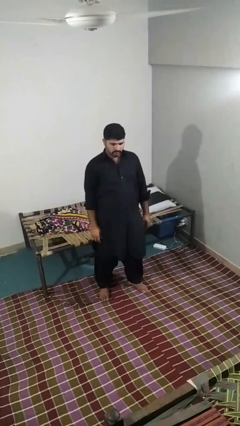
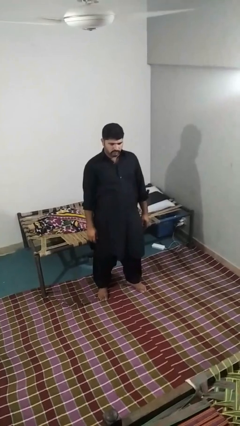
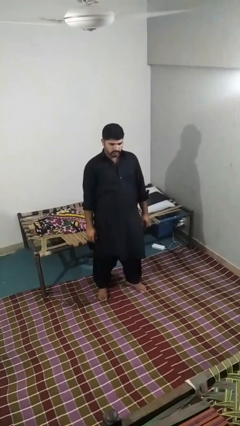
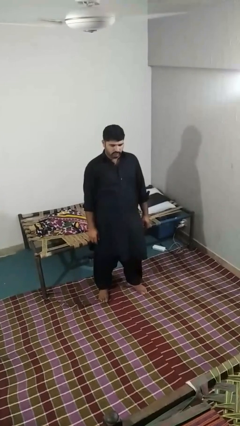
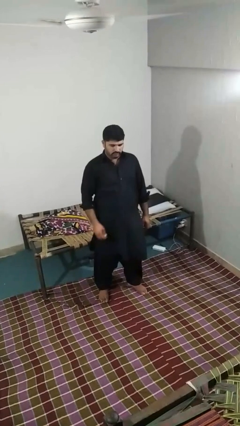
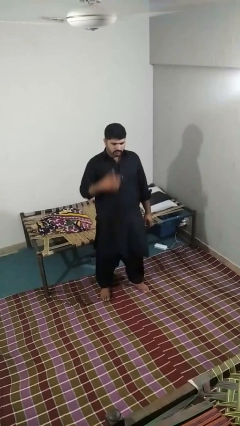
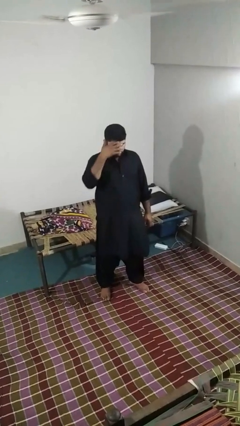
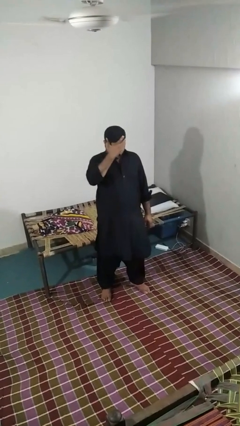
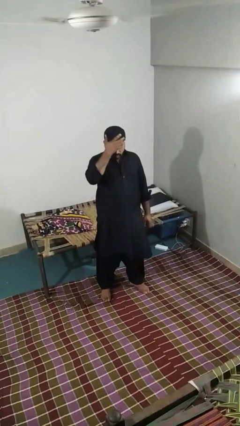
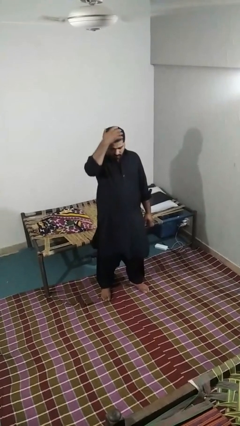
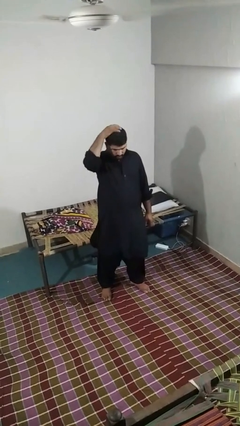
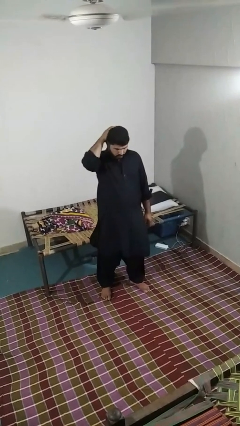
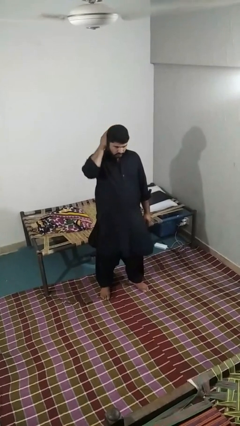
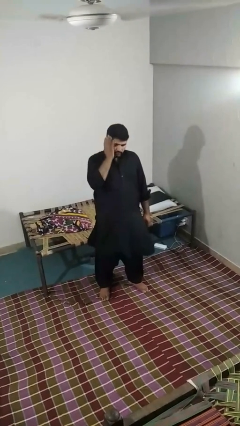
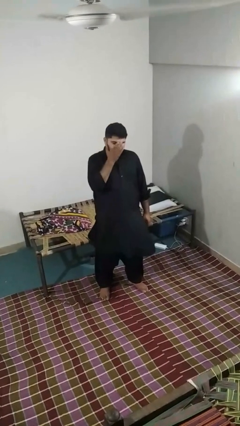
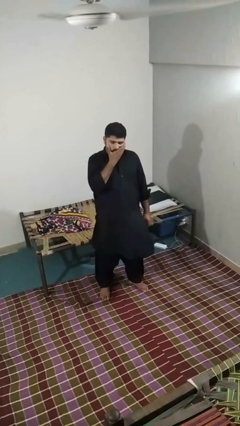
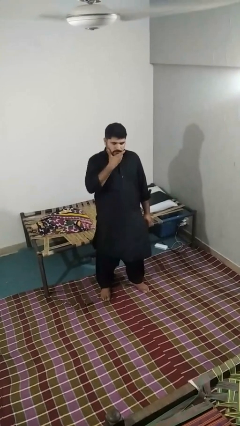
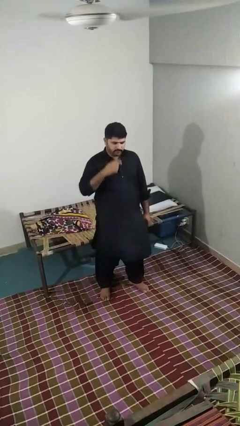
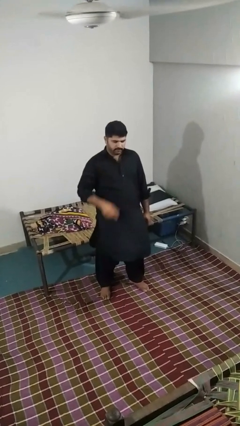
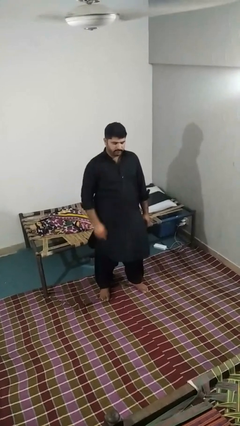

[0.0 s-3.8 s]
person scratches face

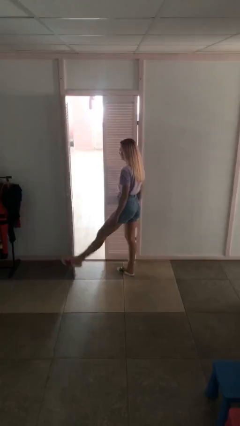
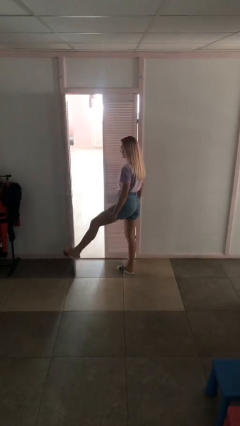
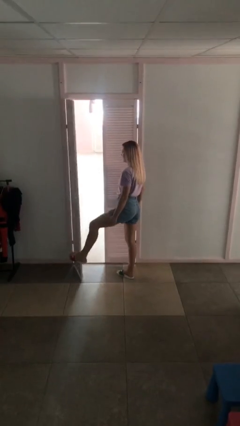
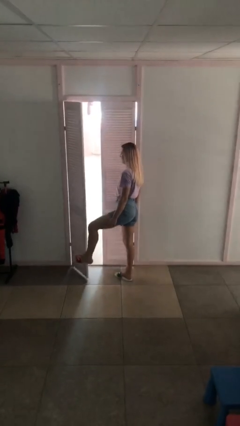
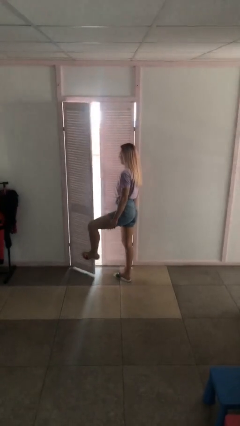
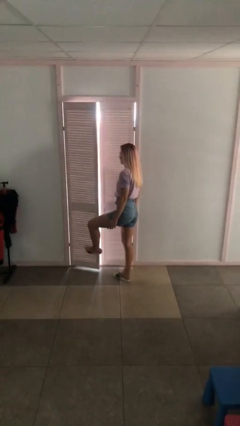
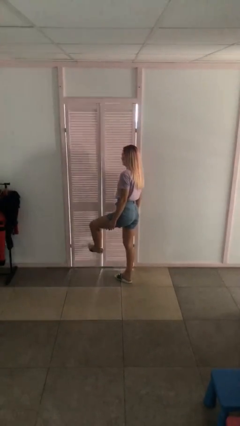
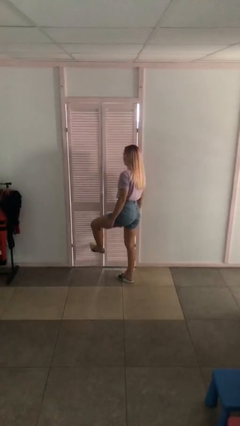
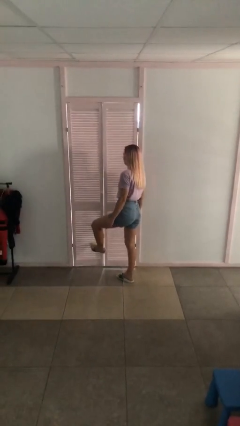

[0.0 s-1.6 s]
person closes door with foot

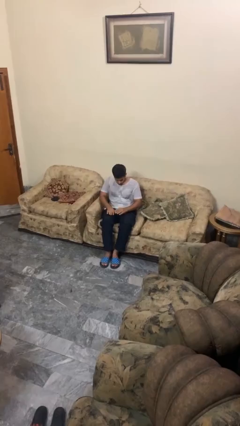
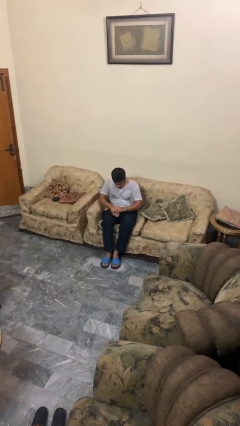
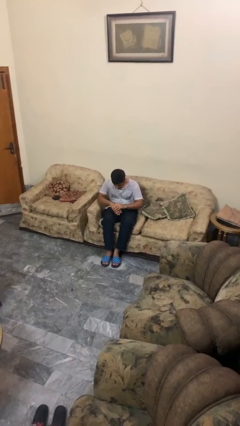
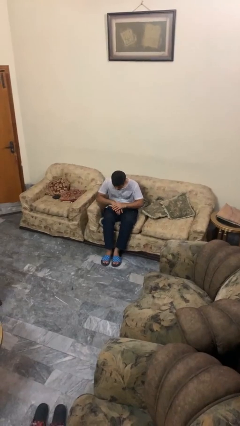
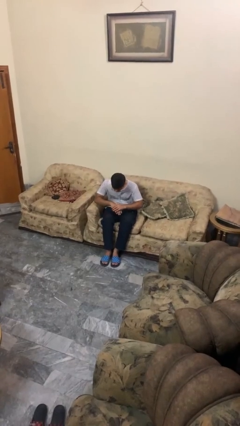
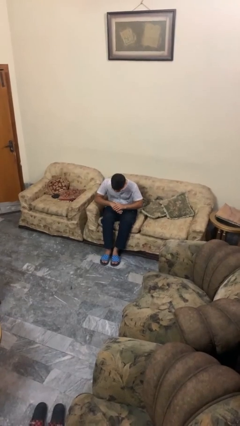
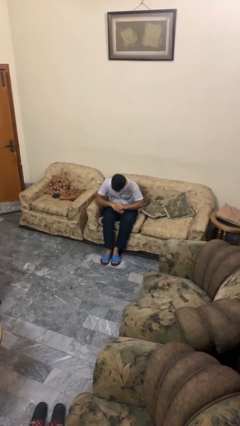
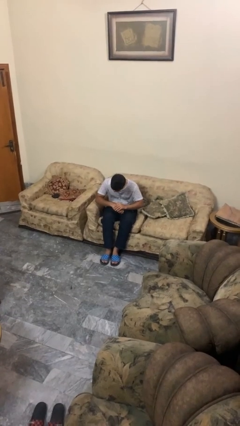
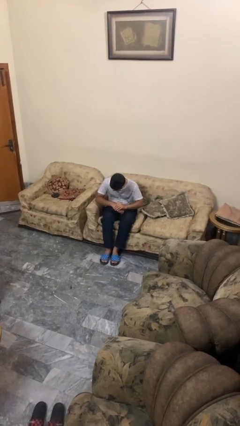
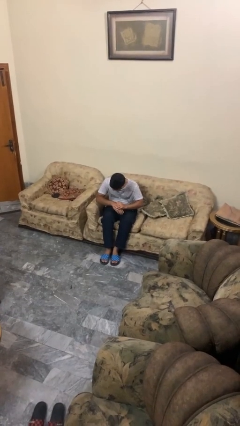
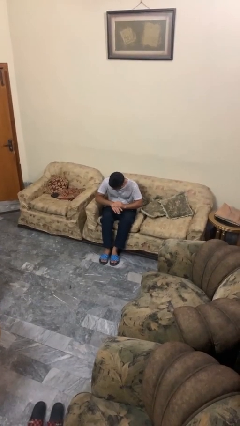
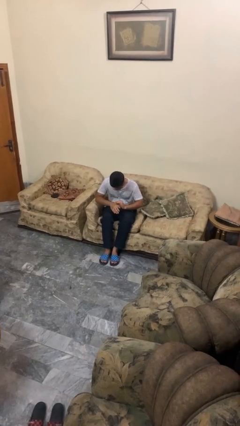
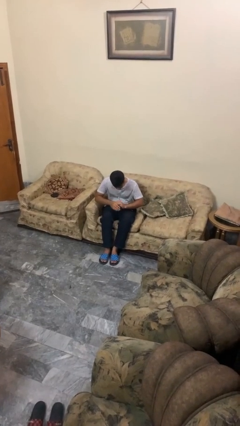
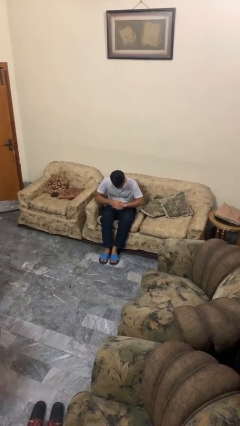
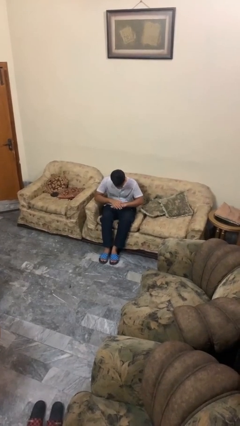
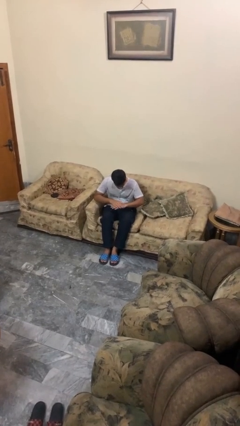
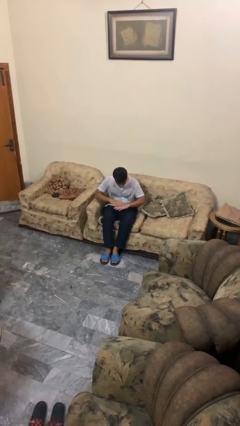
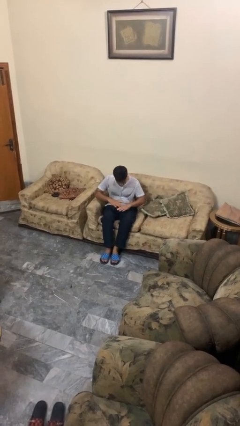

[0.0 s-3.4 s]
person looks at hands in lap

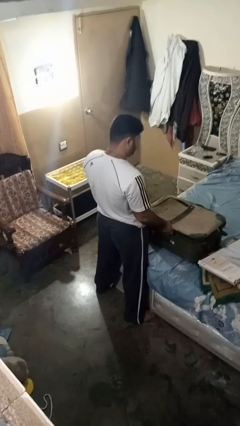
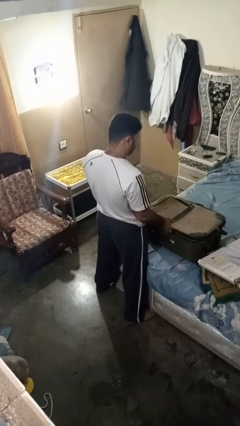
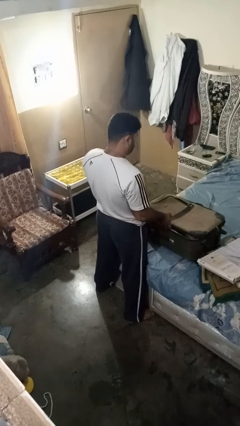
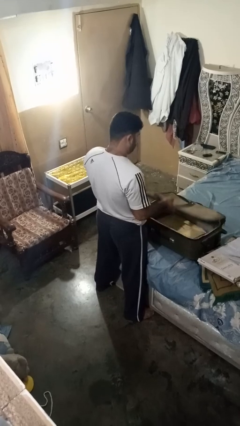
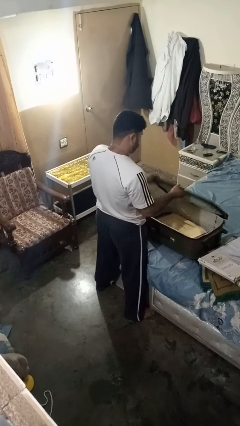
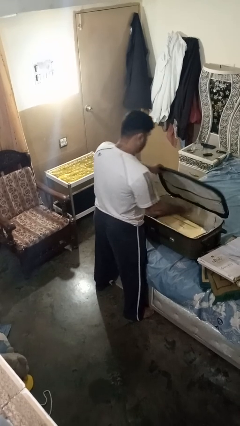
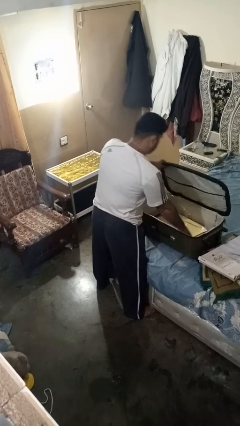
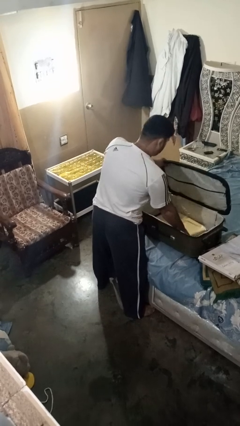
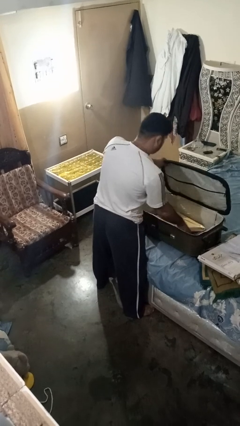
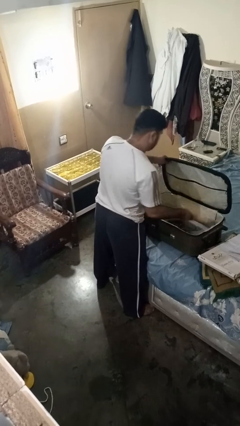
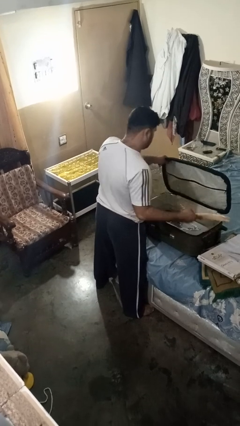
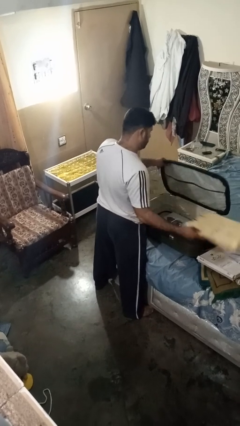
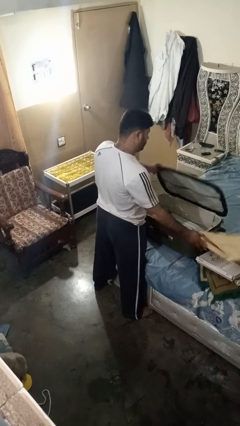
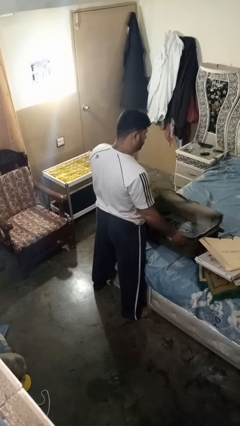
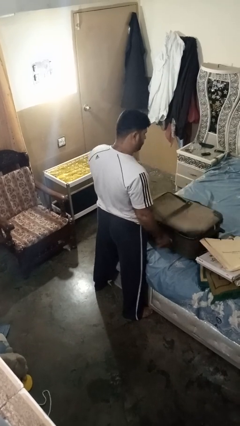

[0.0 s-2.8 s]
person unloads clothes from suitcase

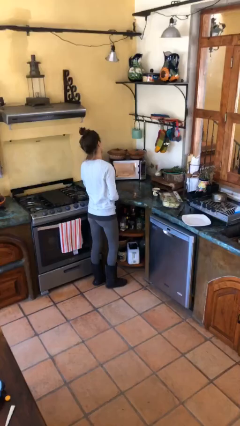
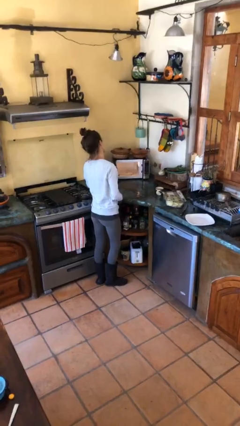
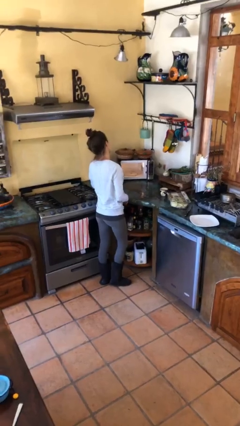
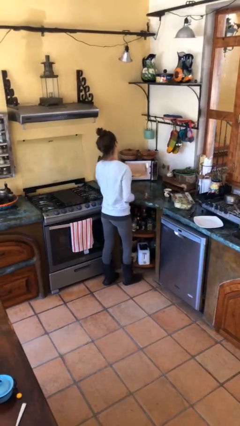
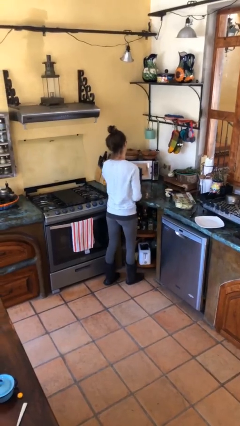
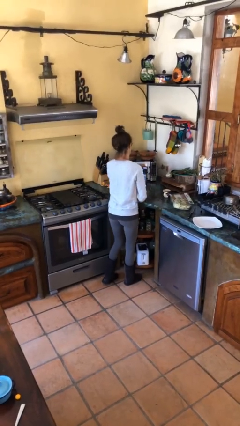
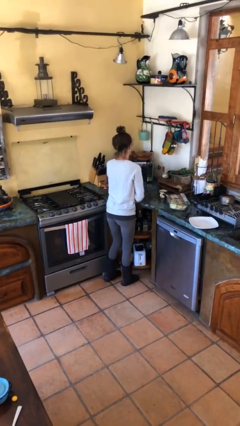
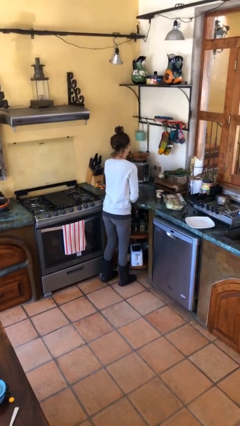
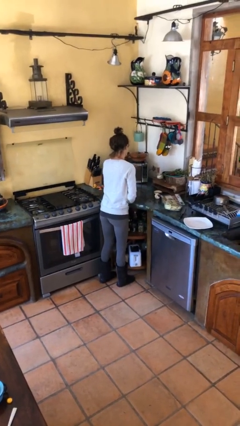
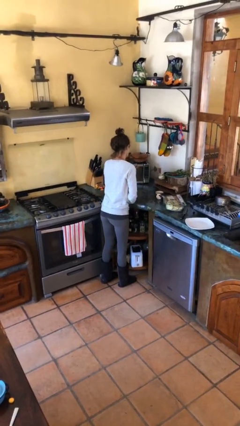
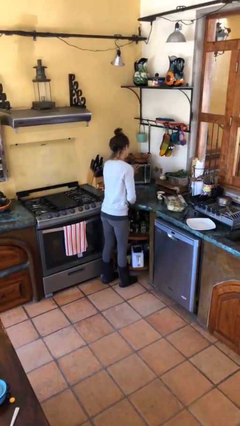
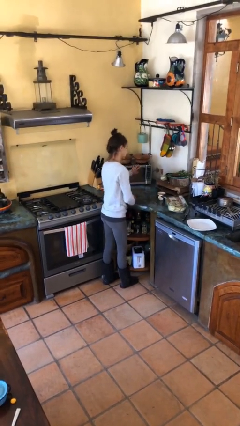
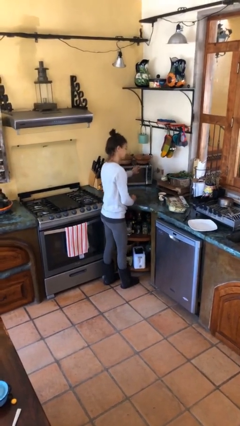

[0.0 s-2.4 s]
person closes microwave

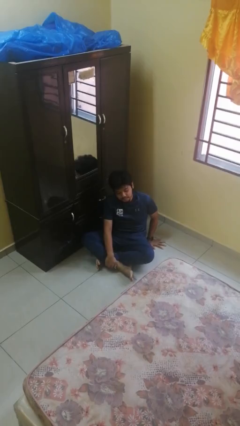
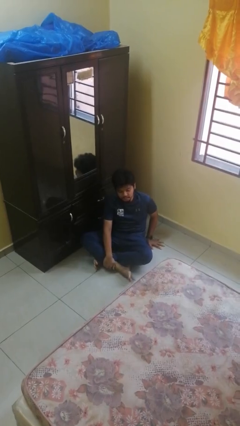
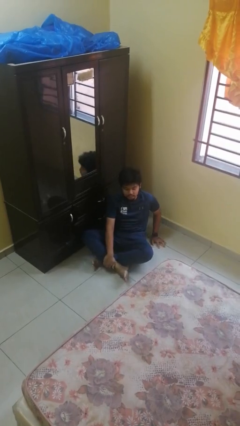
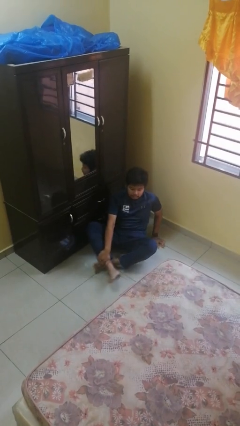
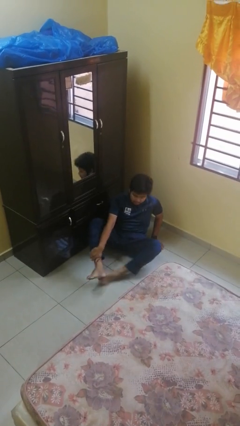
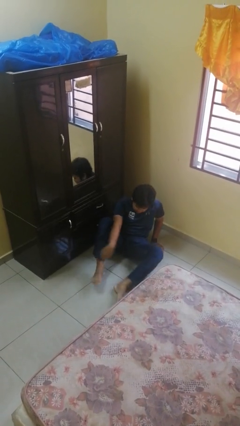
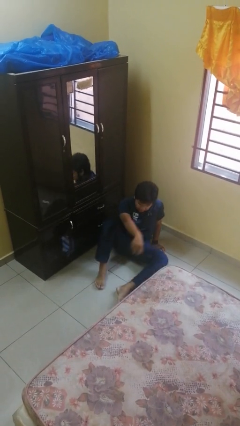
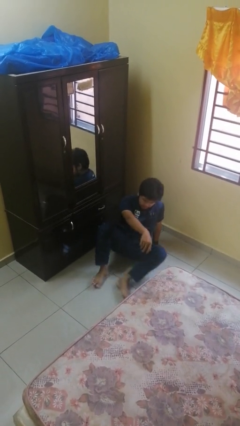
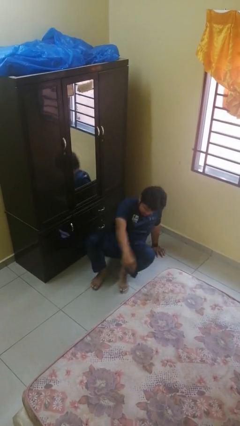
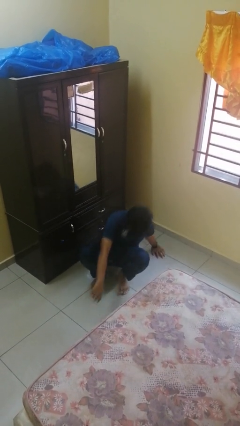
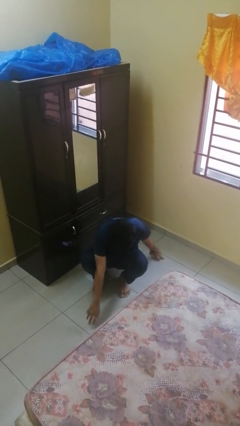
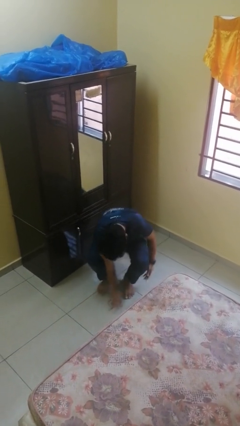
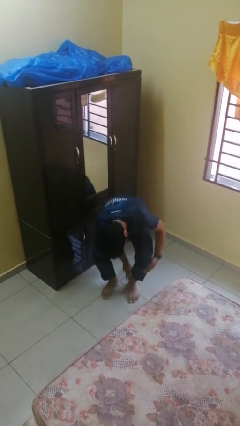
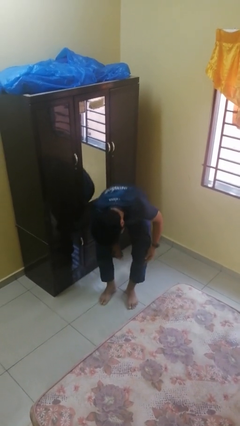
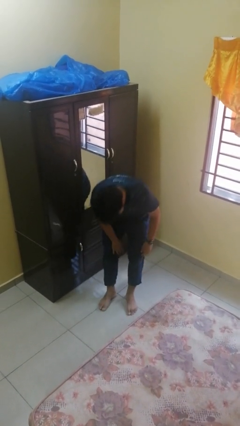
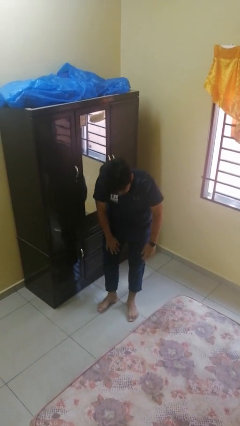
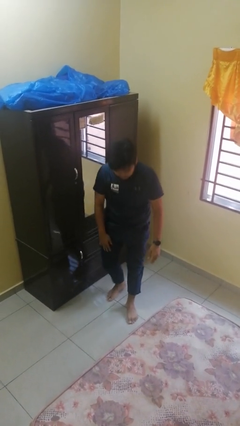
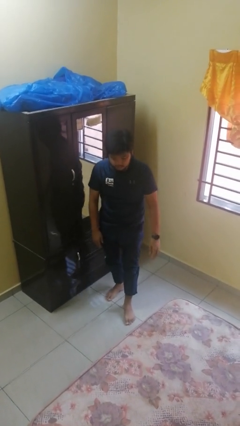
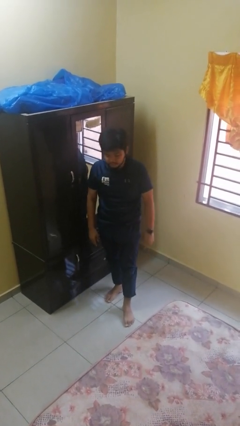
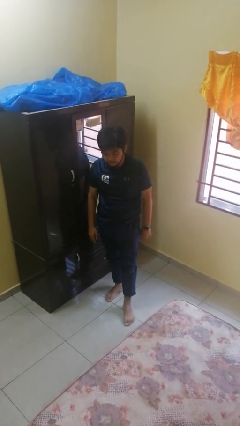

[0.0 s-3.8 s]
person stands up from floor
